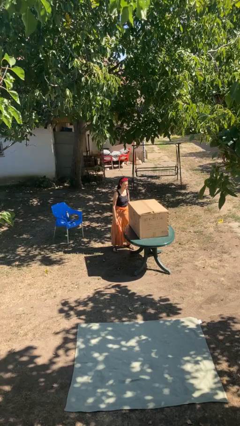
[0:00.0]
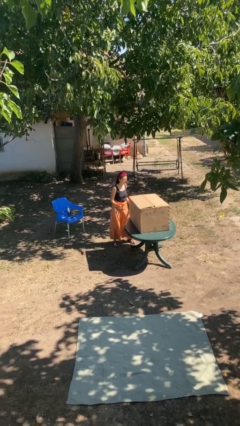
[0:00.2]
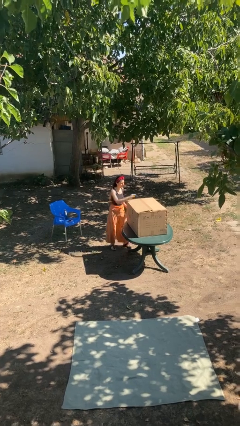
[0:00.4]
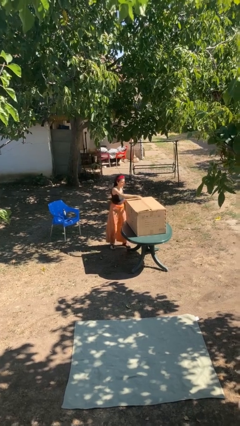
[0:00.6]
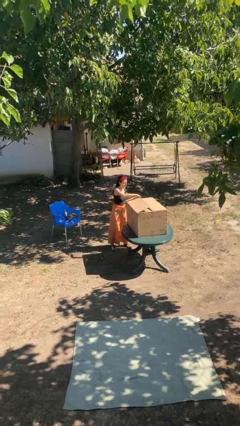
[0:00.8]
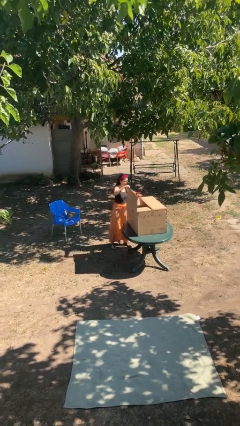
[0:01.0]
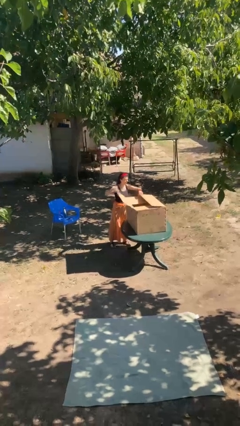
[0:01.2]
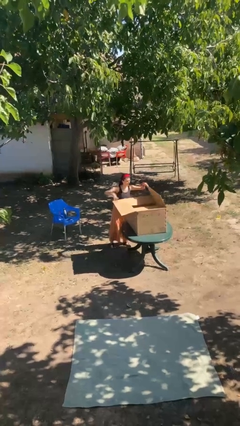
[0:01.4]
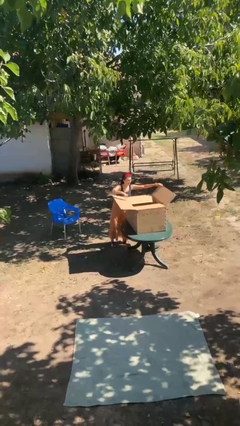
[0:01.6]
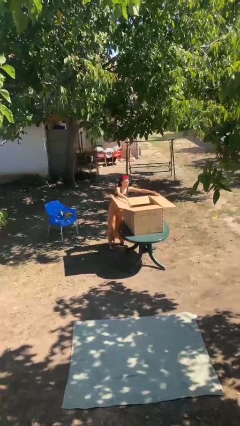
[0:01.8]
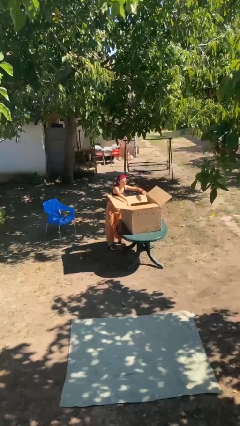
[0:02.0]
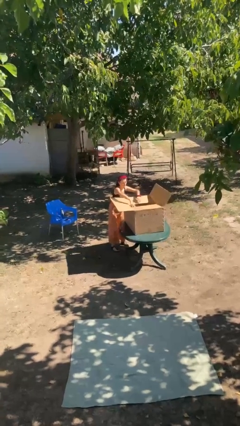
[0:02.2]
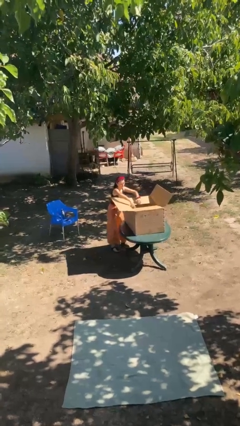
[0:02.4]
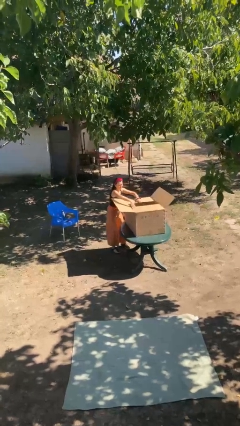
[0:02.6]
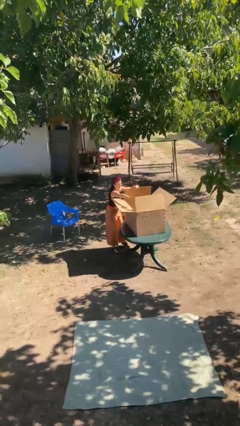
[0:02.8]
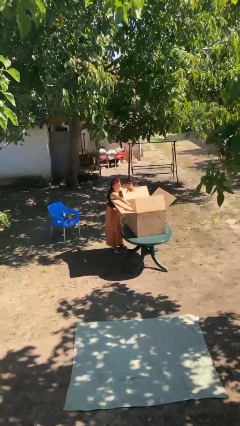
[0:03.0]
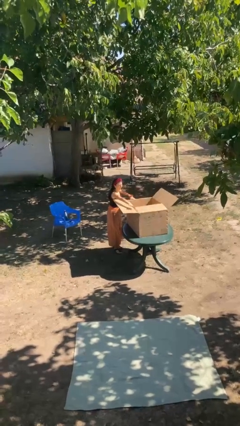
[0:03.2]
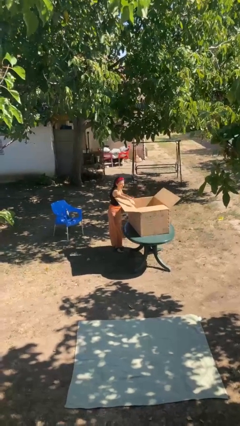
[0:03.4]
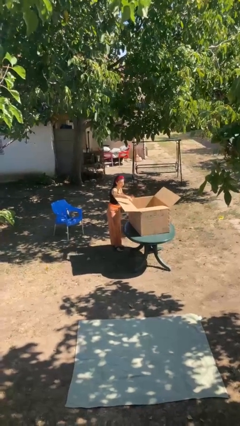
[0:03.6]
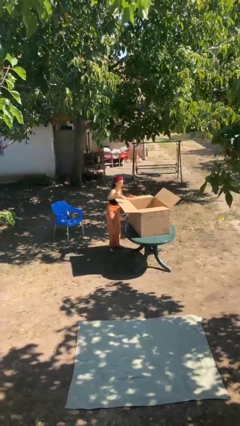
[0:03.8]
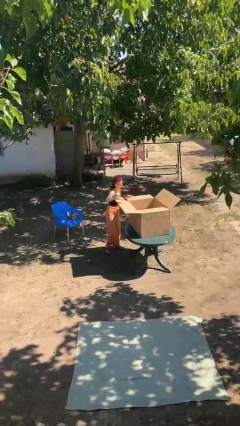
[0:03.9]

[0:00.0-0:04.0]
person opens box

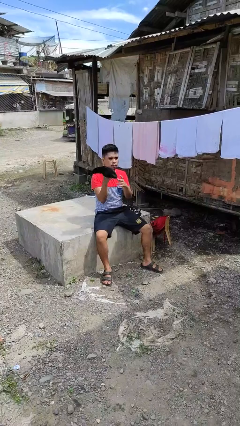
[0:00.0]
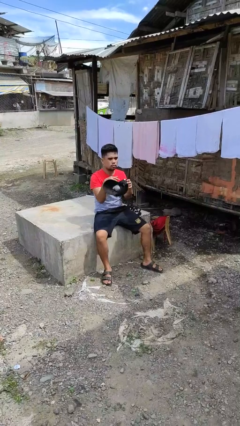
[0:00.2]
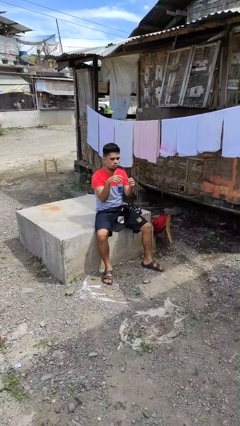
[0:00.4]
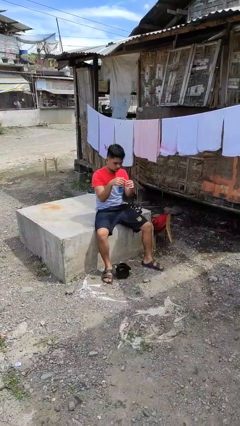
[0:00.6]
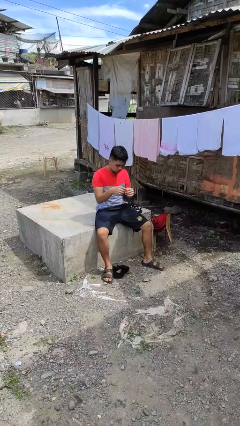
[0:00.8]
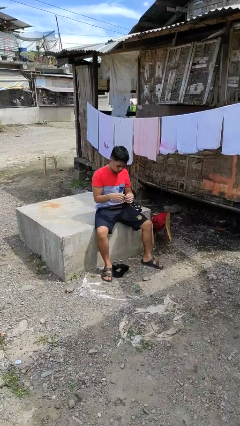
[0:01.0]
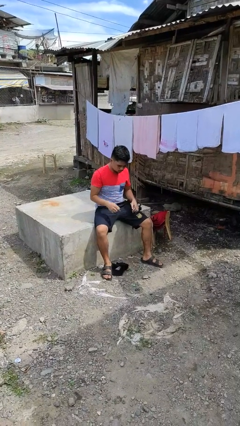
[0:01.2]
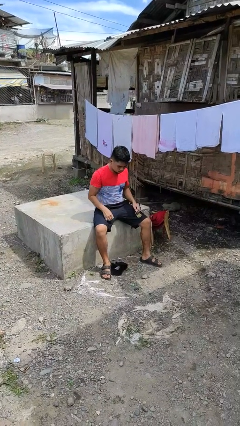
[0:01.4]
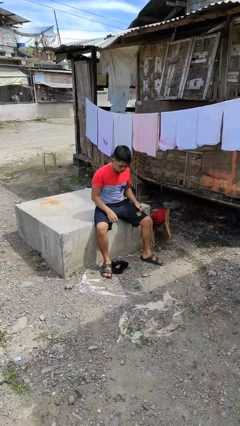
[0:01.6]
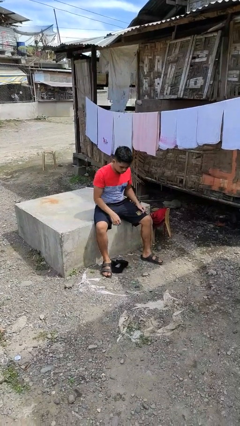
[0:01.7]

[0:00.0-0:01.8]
person drops object

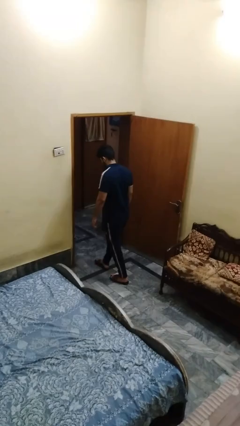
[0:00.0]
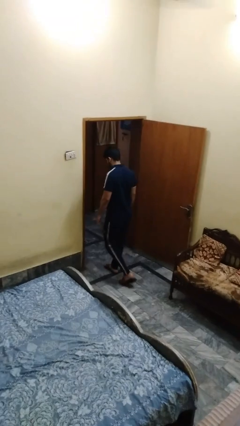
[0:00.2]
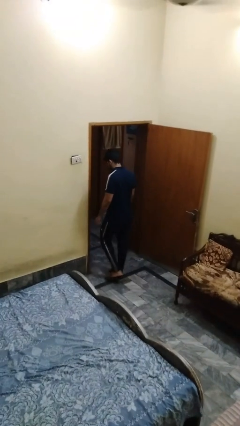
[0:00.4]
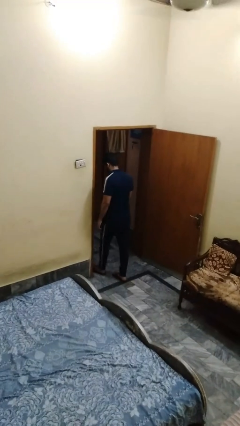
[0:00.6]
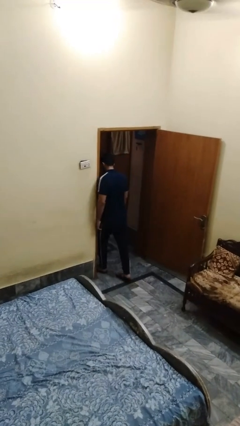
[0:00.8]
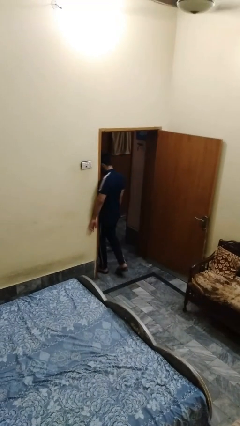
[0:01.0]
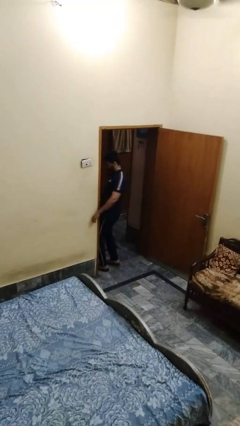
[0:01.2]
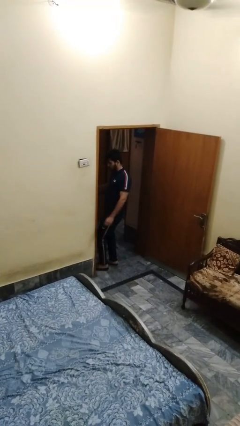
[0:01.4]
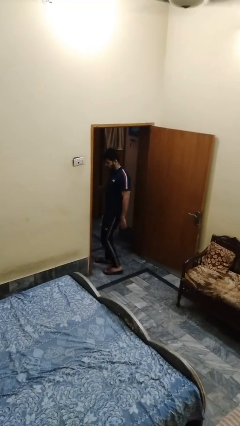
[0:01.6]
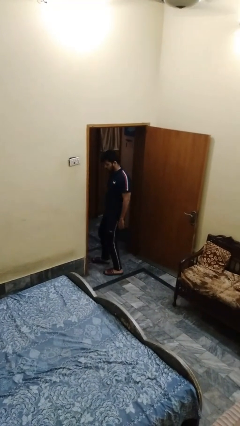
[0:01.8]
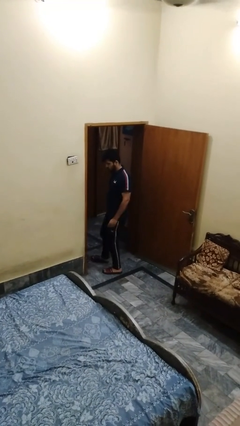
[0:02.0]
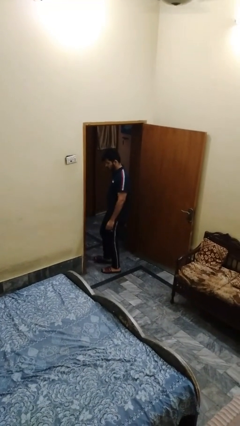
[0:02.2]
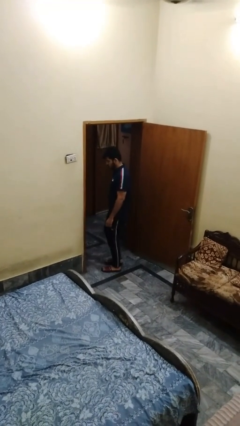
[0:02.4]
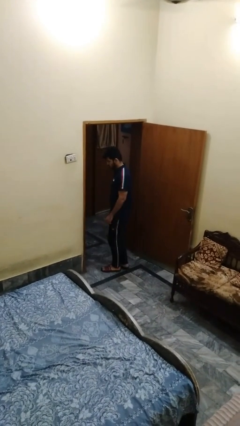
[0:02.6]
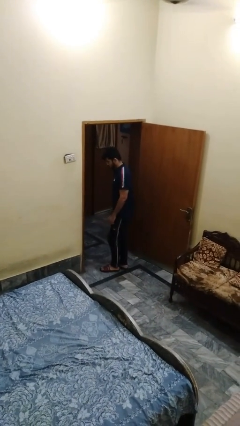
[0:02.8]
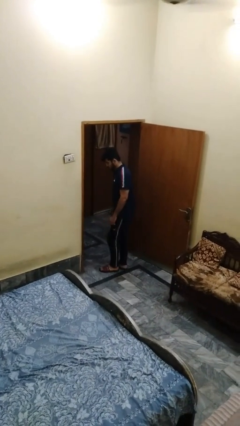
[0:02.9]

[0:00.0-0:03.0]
person bumps into wall

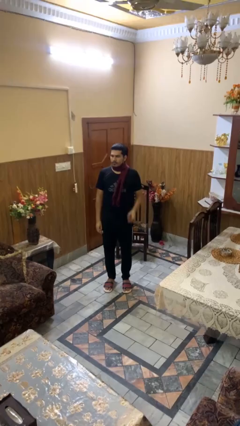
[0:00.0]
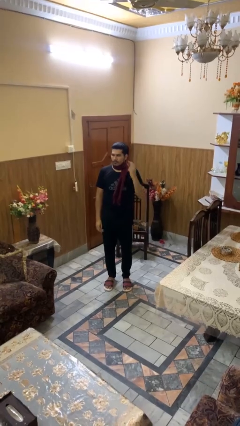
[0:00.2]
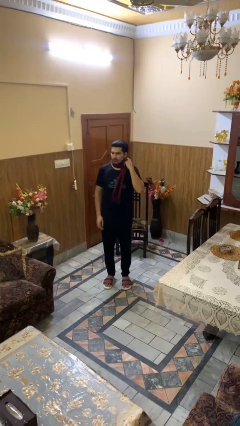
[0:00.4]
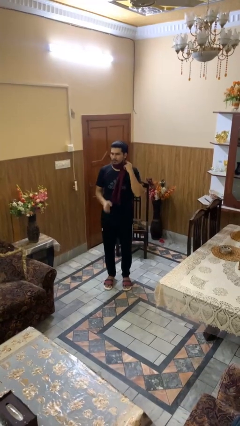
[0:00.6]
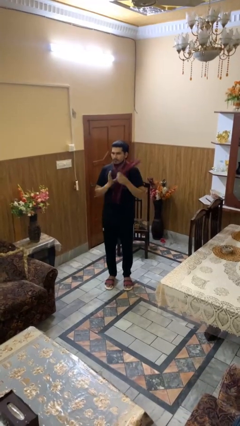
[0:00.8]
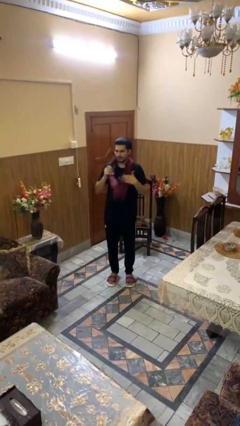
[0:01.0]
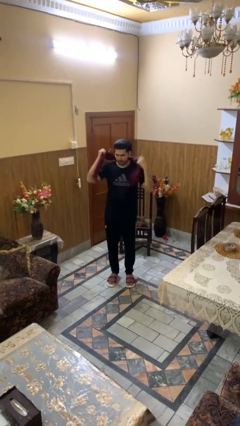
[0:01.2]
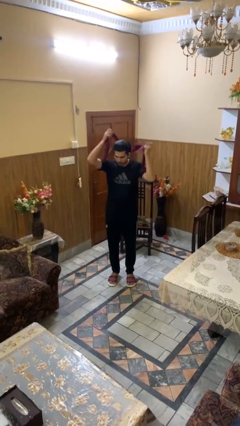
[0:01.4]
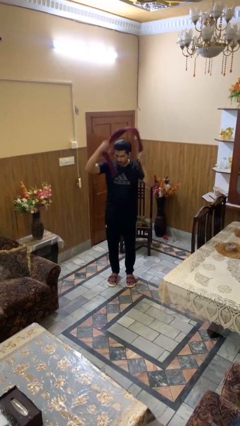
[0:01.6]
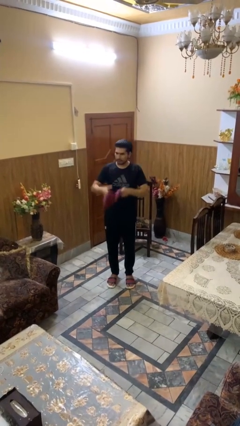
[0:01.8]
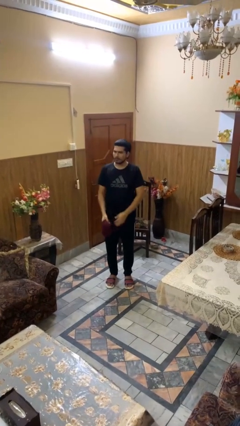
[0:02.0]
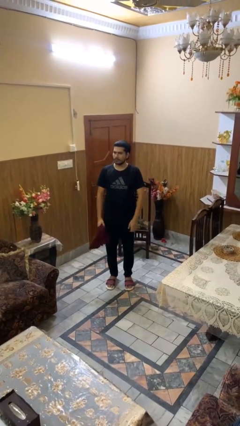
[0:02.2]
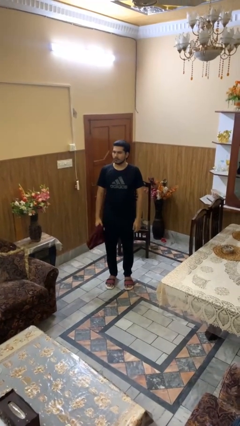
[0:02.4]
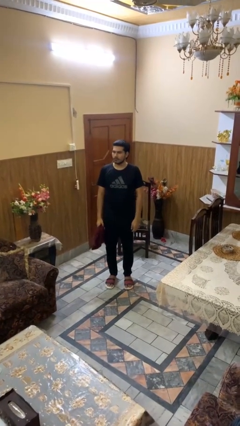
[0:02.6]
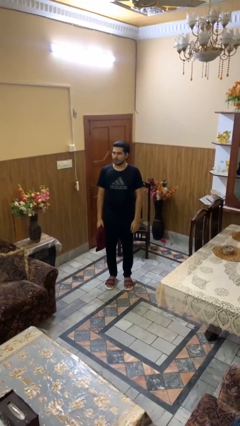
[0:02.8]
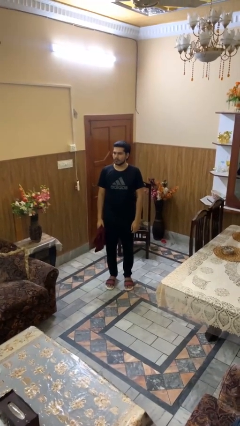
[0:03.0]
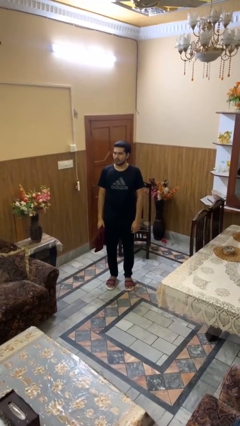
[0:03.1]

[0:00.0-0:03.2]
person takes off scarf

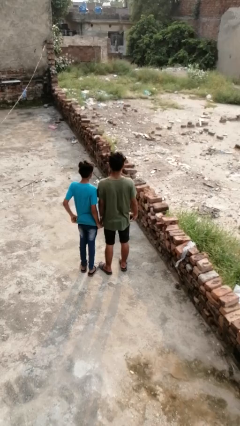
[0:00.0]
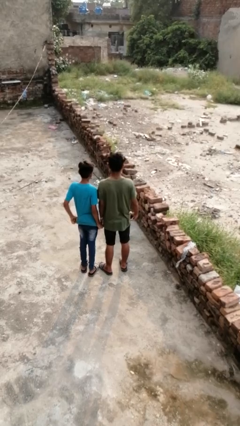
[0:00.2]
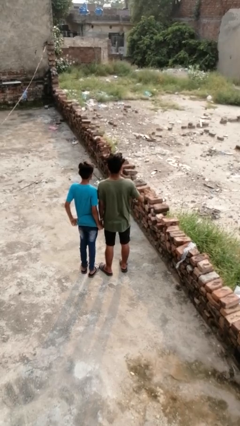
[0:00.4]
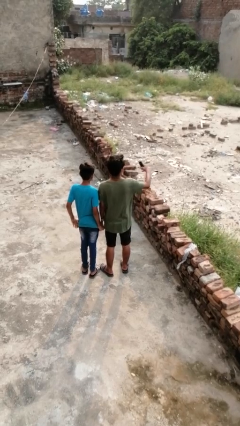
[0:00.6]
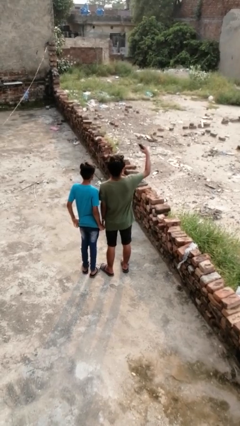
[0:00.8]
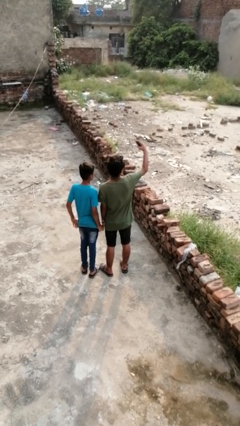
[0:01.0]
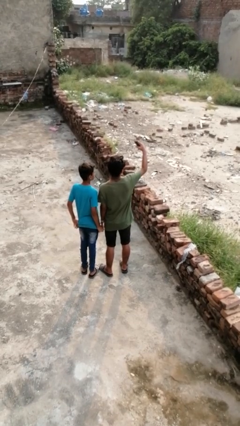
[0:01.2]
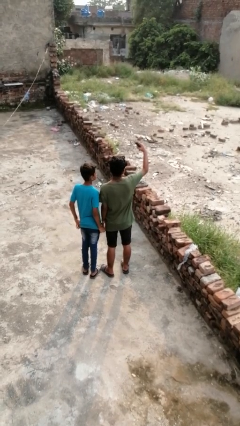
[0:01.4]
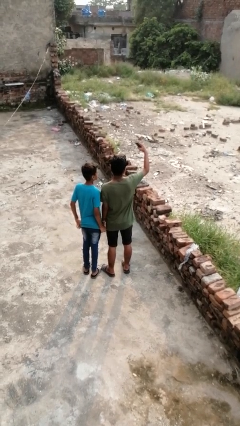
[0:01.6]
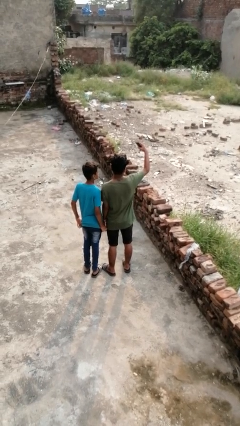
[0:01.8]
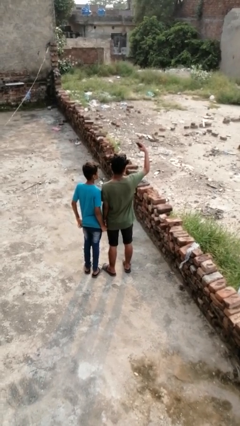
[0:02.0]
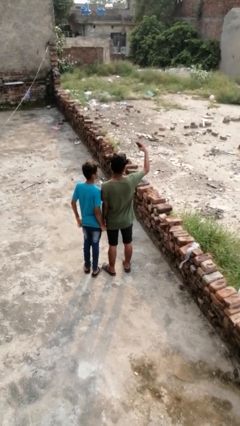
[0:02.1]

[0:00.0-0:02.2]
person takes selfie with person

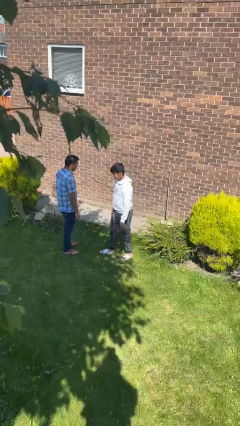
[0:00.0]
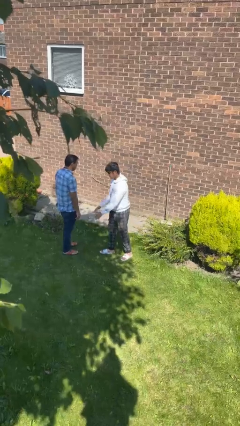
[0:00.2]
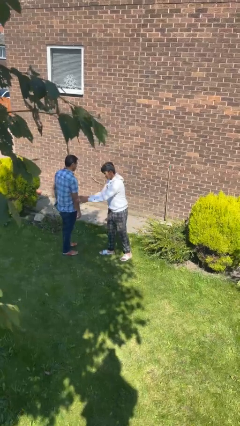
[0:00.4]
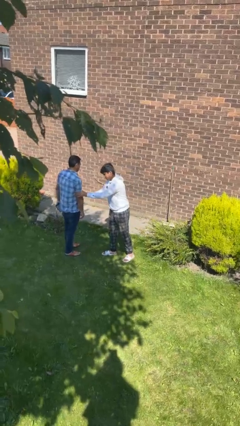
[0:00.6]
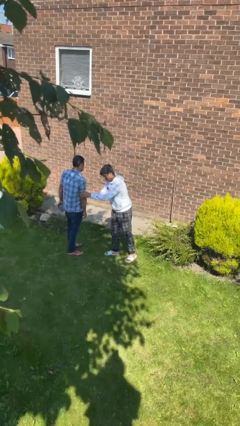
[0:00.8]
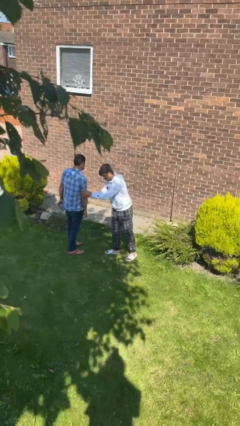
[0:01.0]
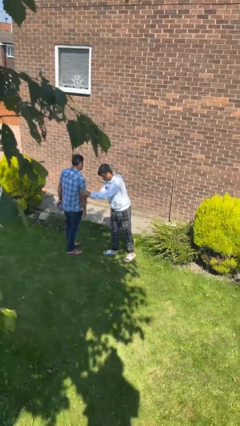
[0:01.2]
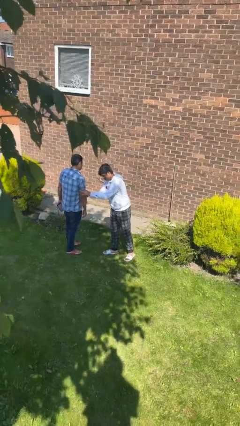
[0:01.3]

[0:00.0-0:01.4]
person grabs person by bicep

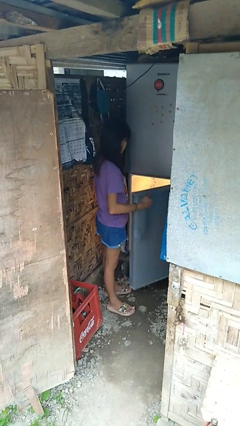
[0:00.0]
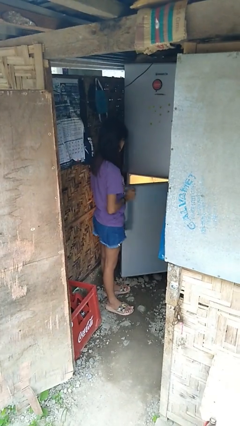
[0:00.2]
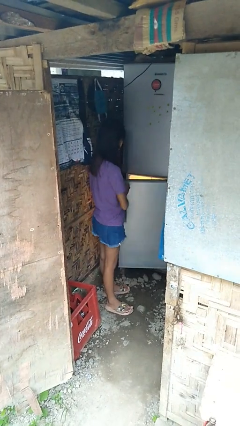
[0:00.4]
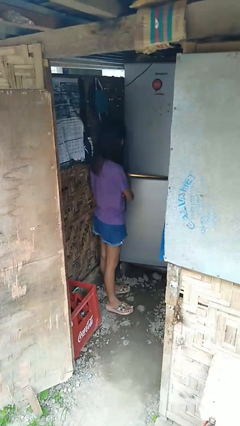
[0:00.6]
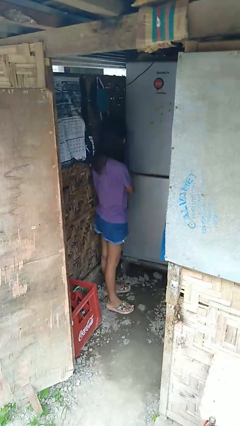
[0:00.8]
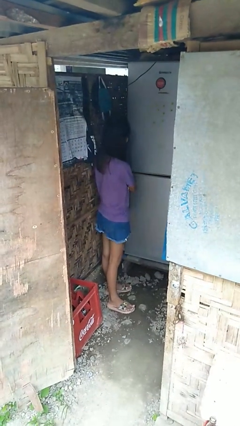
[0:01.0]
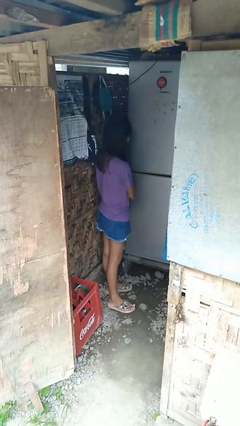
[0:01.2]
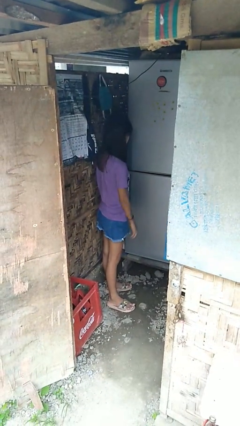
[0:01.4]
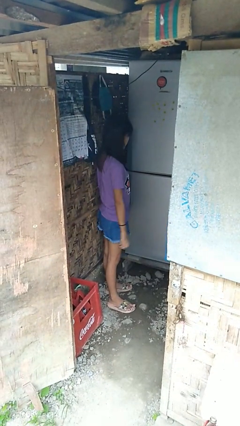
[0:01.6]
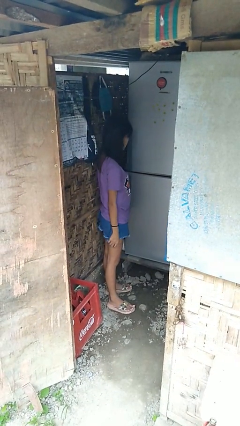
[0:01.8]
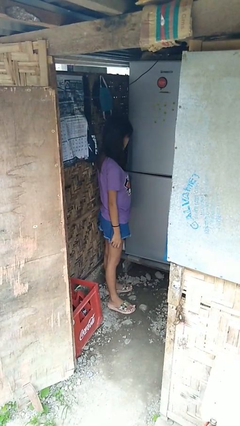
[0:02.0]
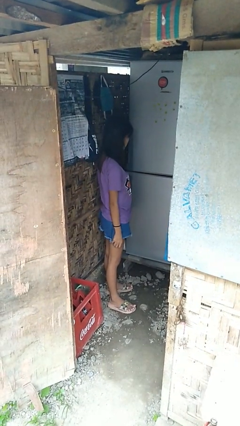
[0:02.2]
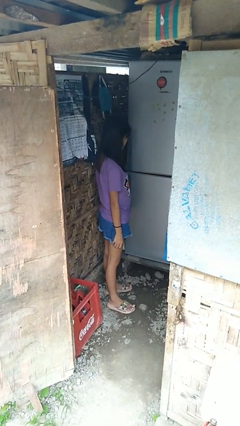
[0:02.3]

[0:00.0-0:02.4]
person closes refrigerator
